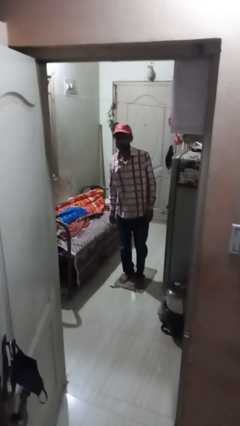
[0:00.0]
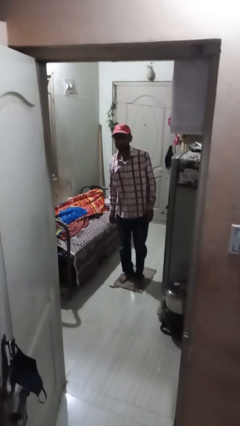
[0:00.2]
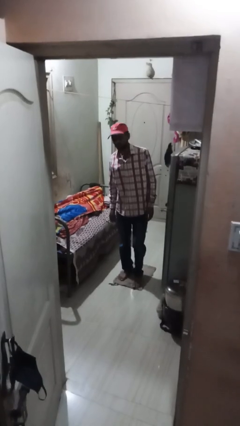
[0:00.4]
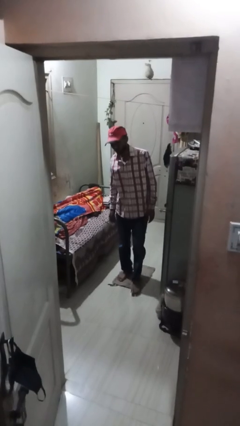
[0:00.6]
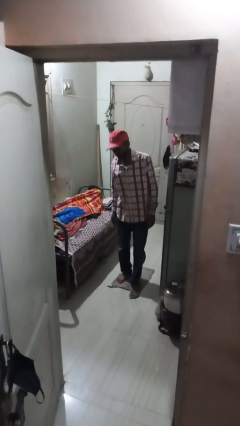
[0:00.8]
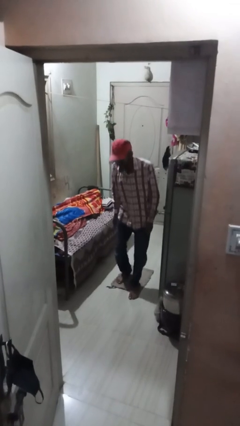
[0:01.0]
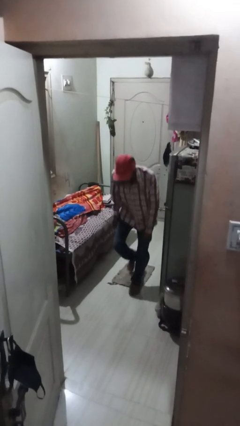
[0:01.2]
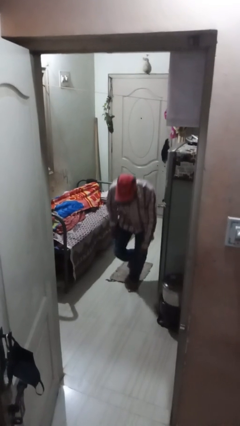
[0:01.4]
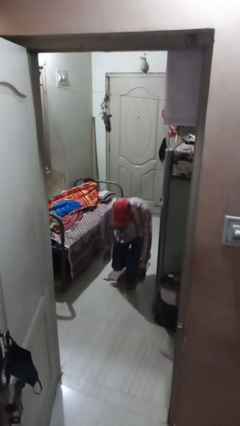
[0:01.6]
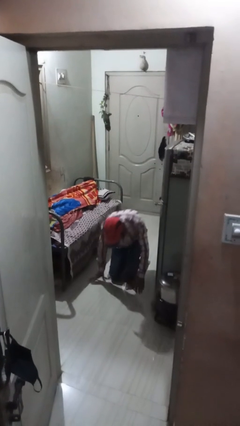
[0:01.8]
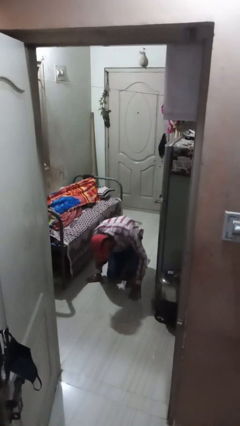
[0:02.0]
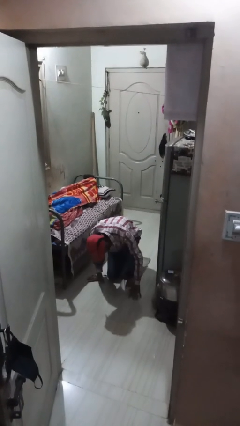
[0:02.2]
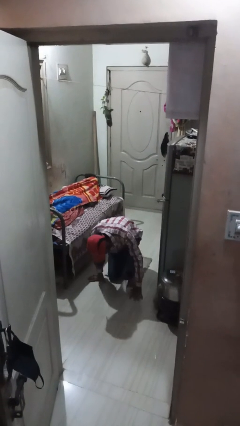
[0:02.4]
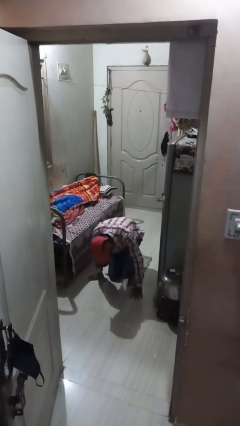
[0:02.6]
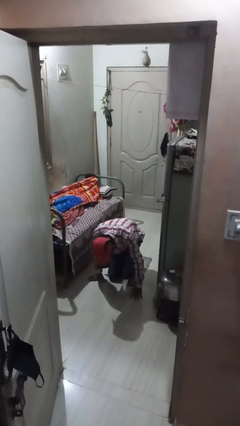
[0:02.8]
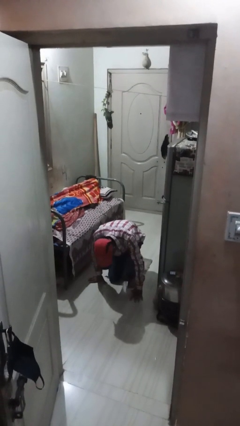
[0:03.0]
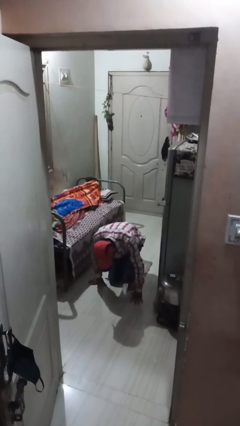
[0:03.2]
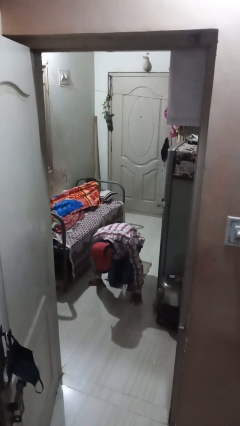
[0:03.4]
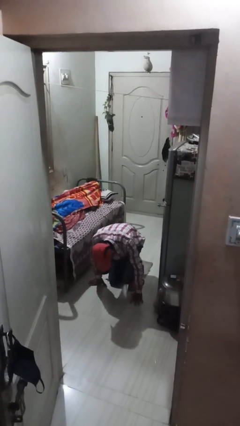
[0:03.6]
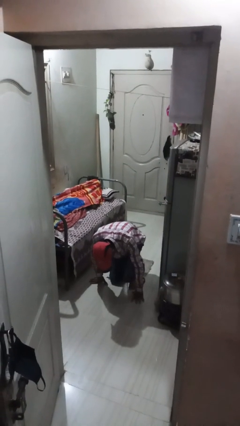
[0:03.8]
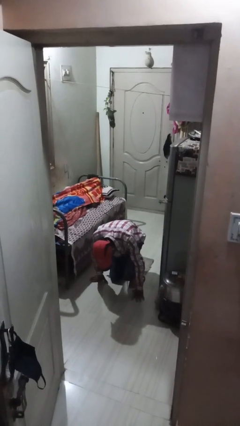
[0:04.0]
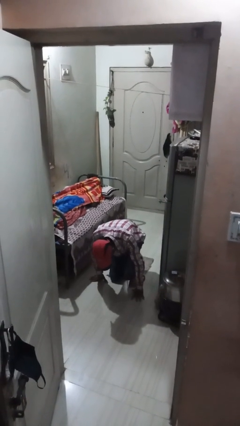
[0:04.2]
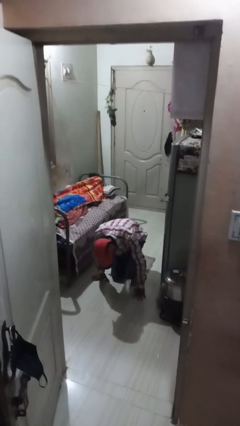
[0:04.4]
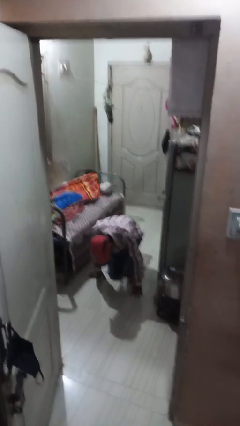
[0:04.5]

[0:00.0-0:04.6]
person kneels

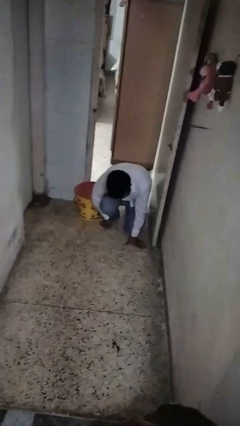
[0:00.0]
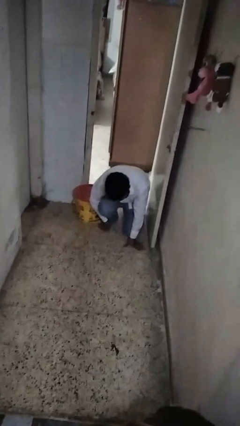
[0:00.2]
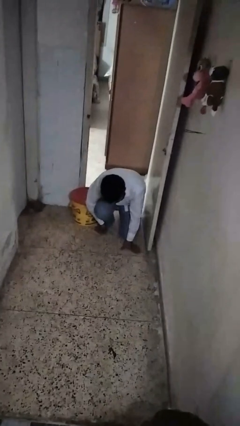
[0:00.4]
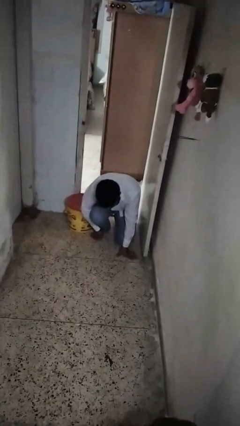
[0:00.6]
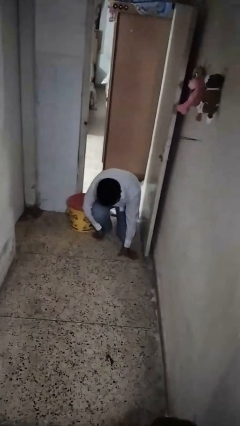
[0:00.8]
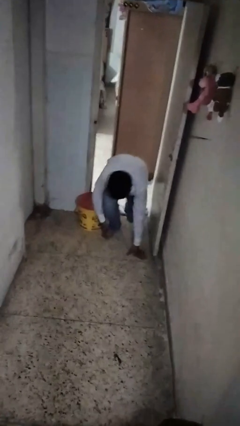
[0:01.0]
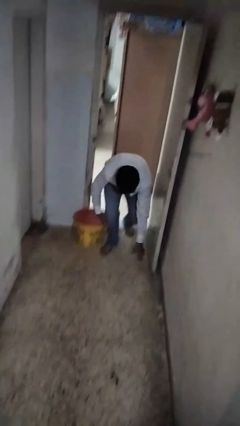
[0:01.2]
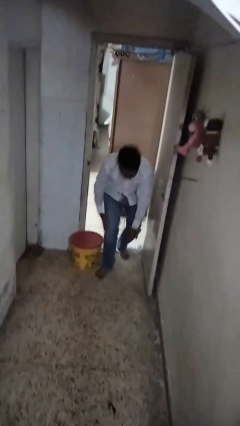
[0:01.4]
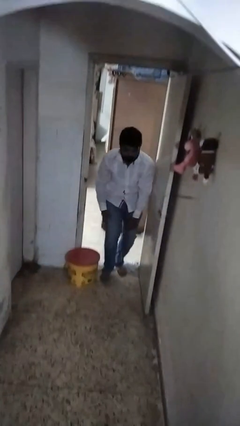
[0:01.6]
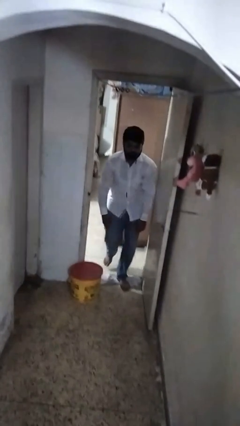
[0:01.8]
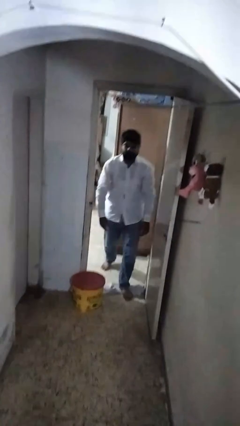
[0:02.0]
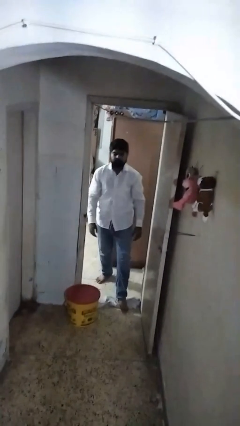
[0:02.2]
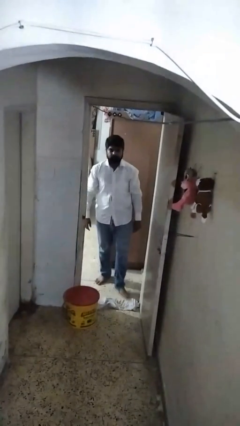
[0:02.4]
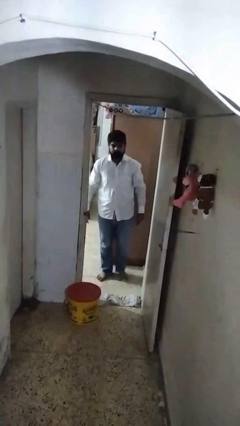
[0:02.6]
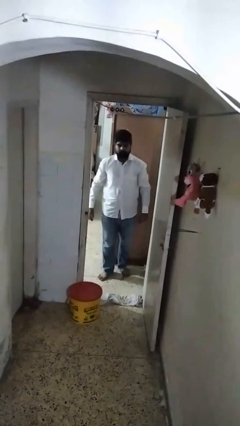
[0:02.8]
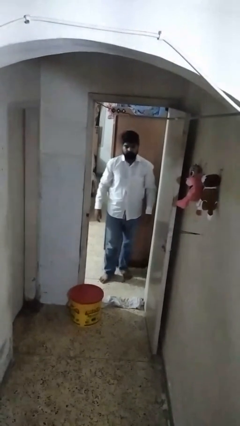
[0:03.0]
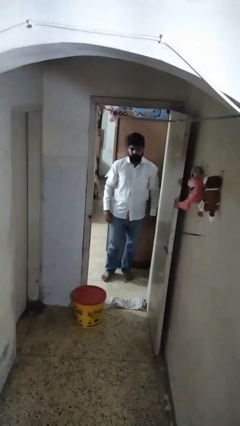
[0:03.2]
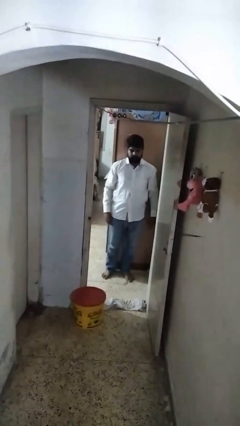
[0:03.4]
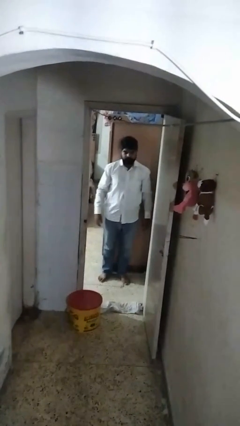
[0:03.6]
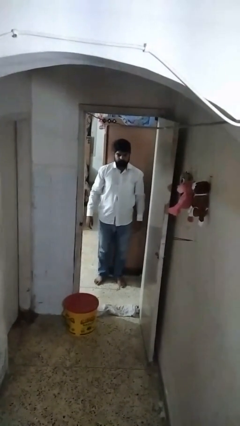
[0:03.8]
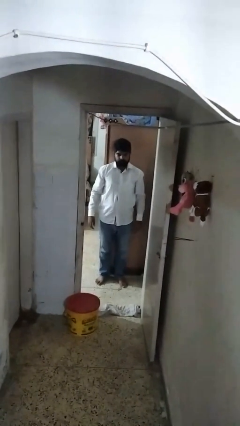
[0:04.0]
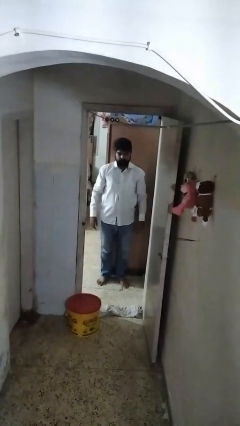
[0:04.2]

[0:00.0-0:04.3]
person stands up from floor

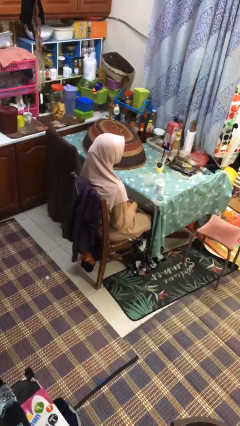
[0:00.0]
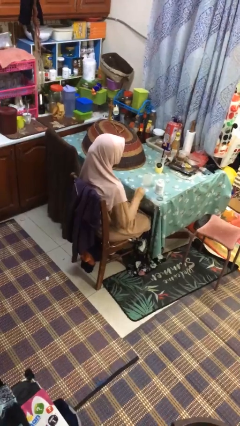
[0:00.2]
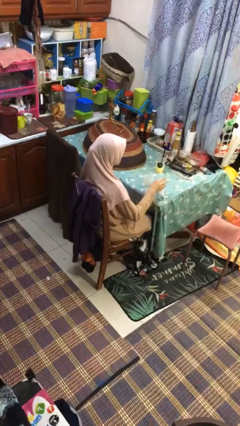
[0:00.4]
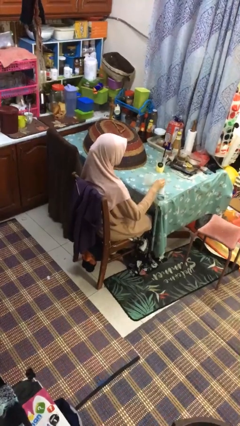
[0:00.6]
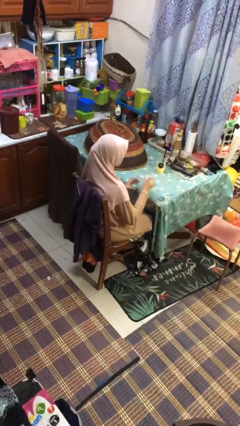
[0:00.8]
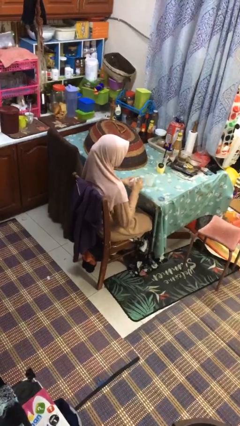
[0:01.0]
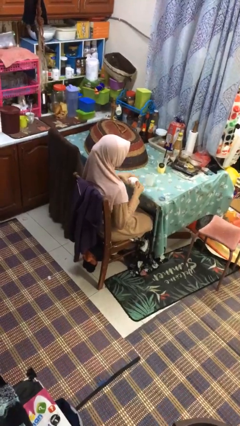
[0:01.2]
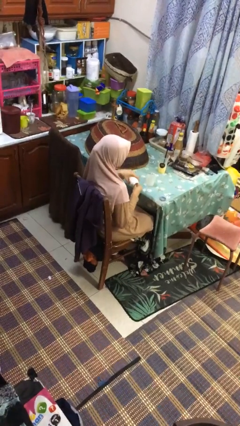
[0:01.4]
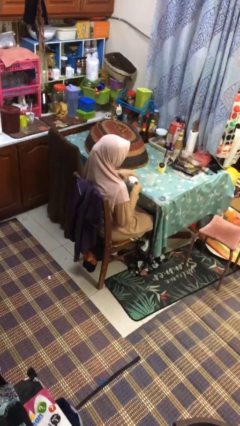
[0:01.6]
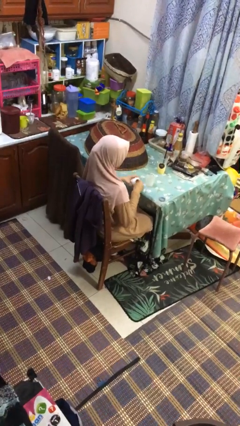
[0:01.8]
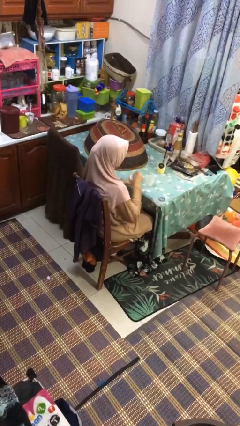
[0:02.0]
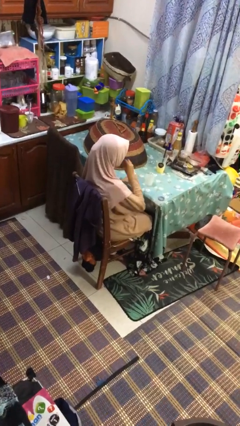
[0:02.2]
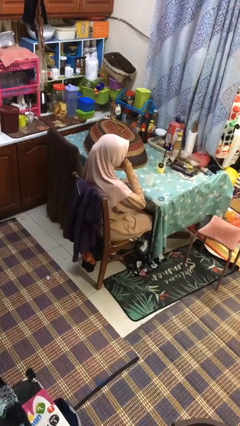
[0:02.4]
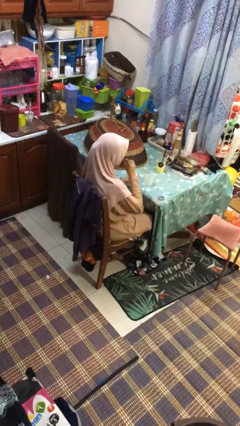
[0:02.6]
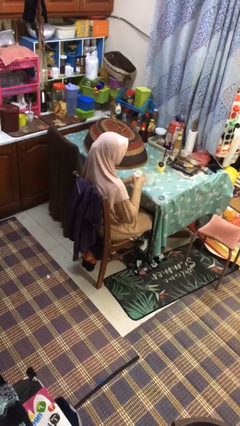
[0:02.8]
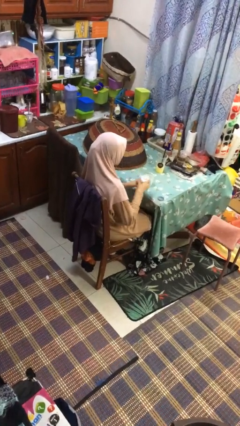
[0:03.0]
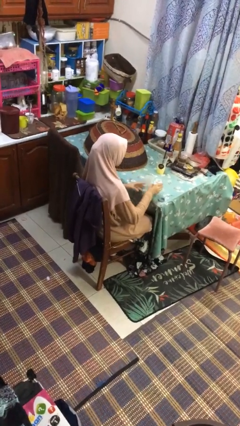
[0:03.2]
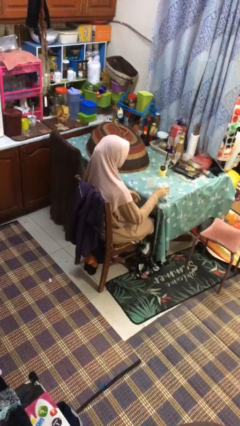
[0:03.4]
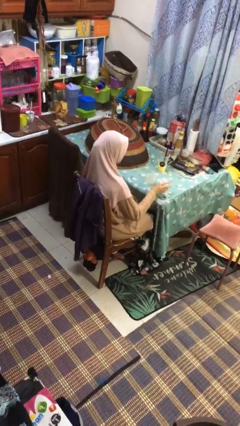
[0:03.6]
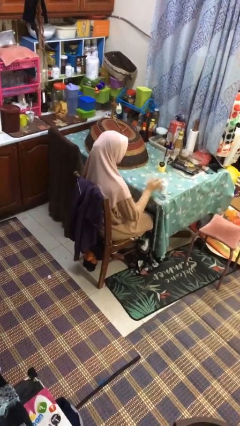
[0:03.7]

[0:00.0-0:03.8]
person takes medicine pills

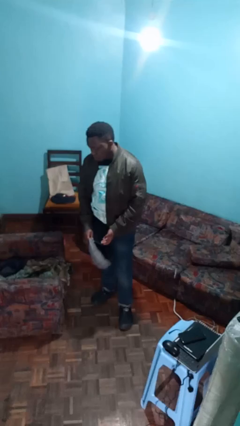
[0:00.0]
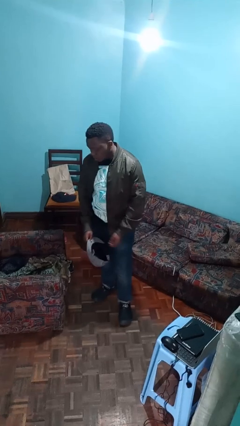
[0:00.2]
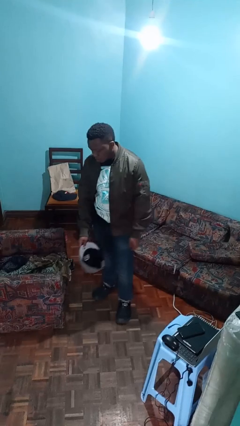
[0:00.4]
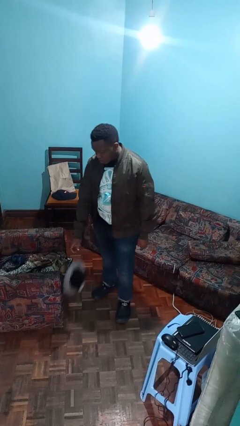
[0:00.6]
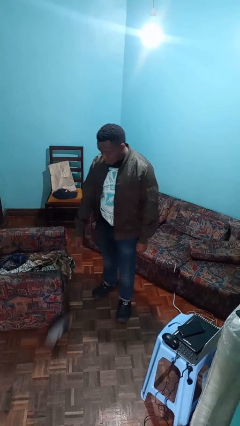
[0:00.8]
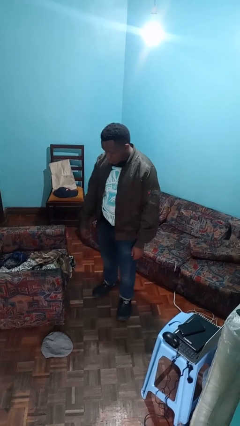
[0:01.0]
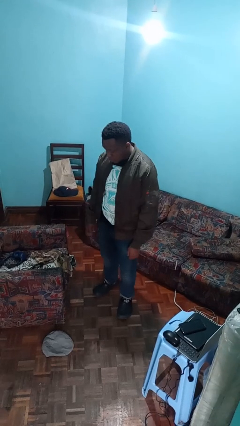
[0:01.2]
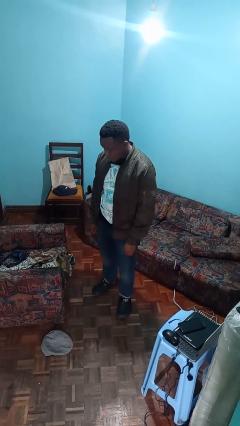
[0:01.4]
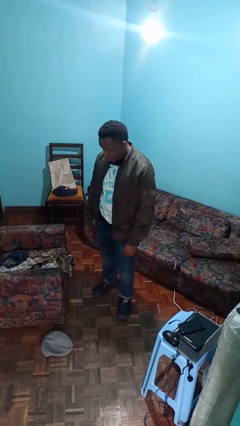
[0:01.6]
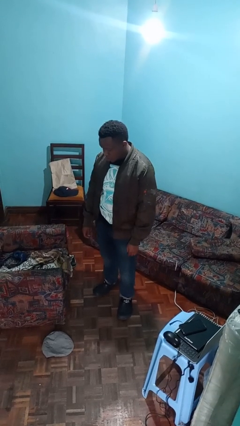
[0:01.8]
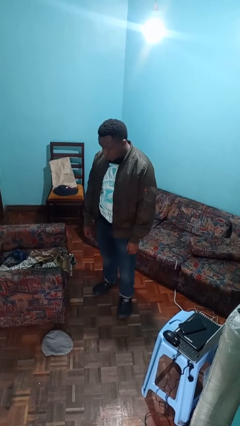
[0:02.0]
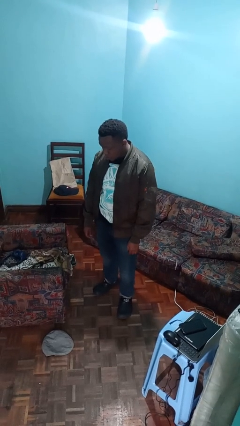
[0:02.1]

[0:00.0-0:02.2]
person drops object

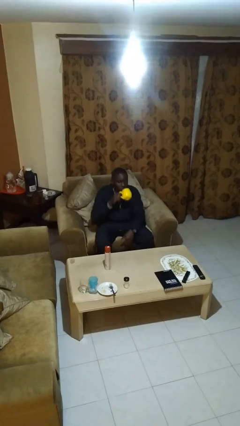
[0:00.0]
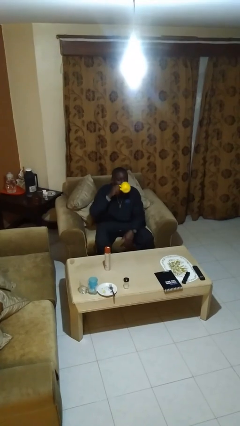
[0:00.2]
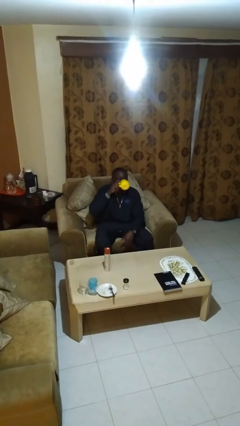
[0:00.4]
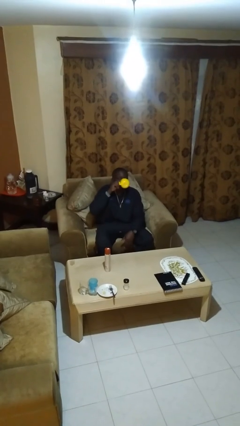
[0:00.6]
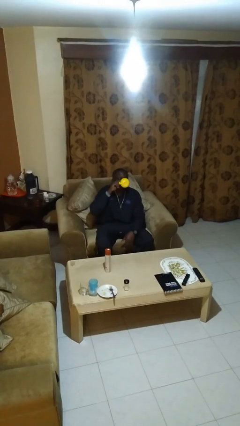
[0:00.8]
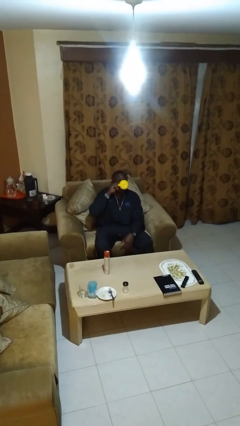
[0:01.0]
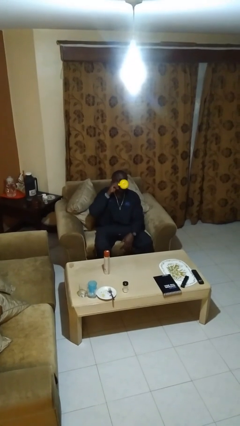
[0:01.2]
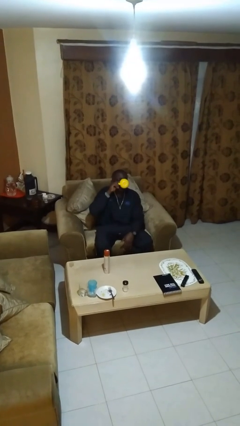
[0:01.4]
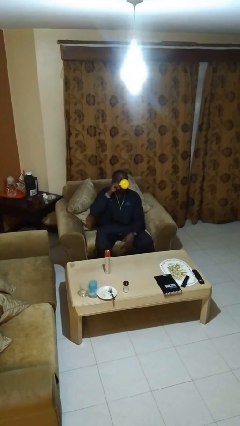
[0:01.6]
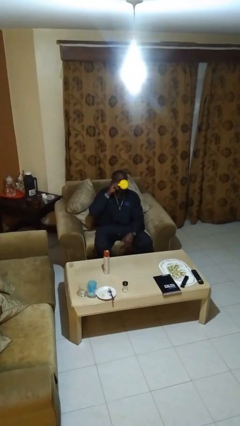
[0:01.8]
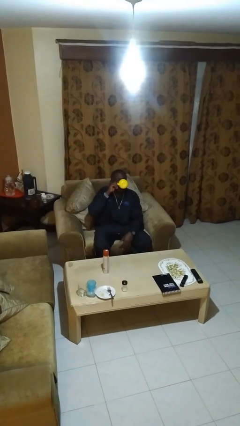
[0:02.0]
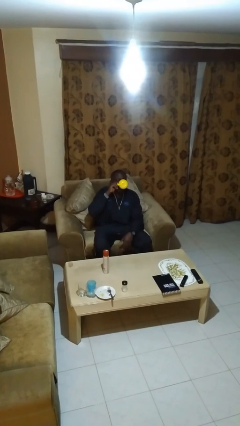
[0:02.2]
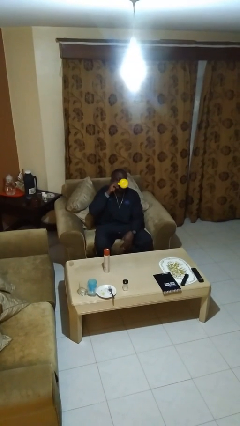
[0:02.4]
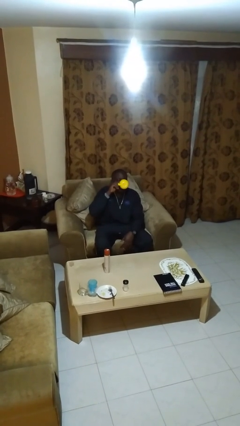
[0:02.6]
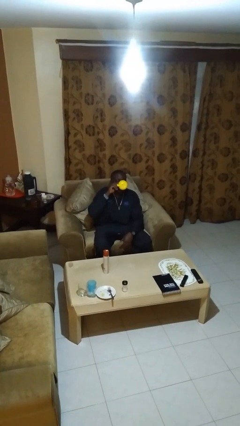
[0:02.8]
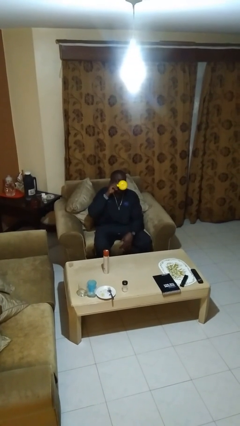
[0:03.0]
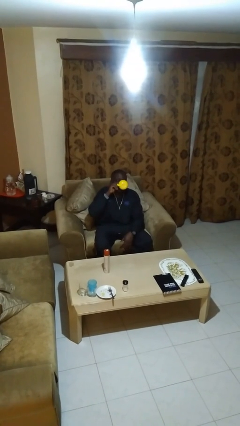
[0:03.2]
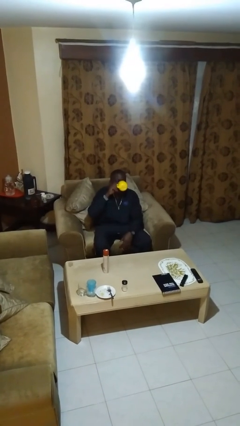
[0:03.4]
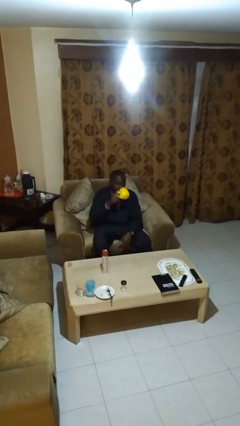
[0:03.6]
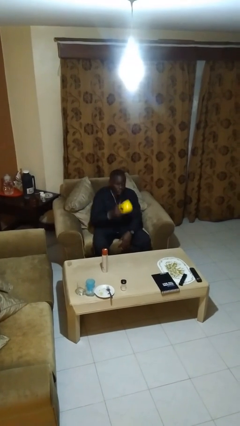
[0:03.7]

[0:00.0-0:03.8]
person drinks from mug
